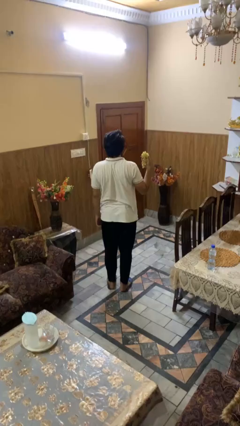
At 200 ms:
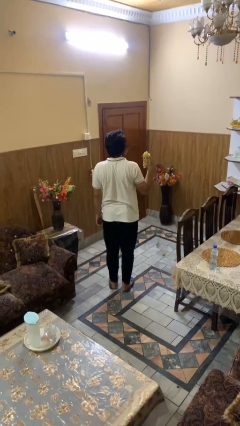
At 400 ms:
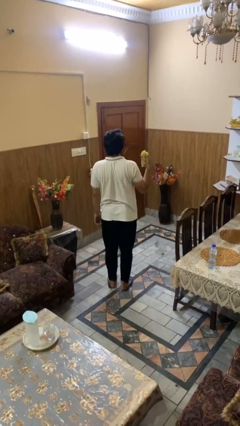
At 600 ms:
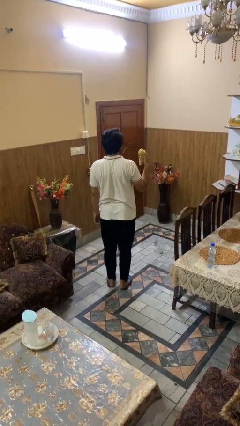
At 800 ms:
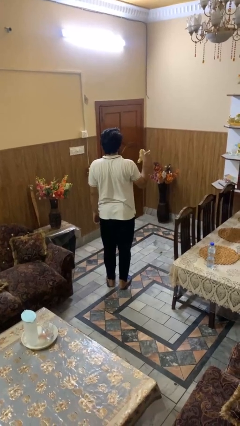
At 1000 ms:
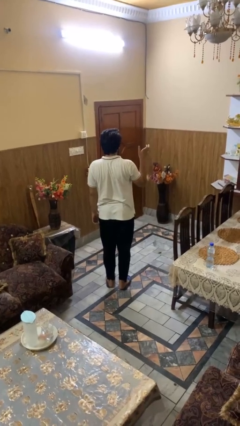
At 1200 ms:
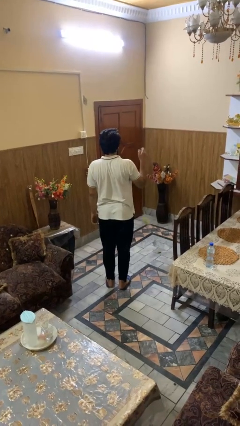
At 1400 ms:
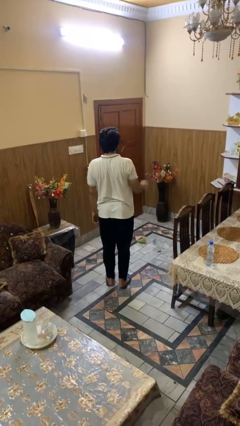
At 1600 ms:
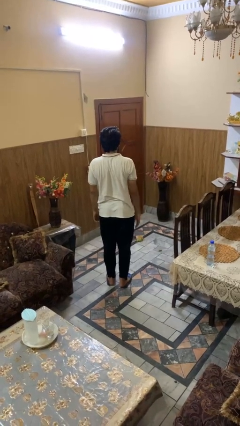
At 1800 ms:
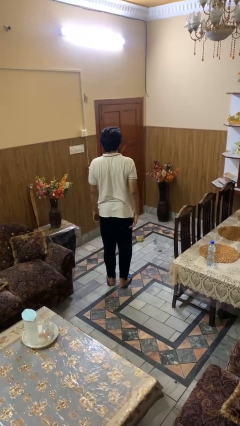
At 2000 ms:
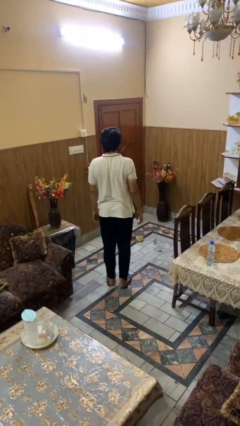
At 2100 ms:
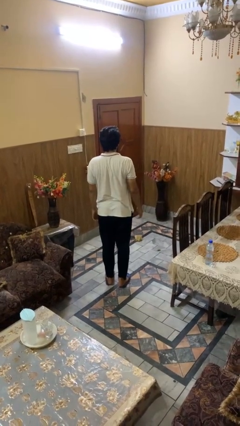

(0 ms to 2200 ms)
person throws object to ground

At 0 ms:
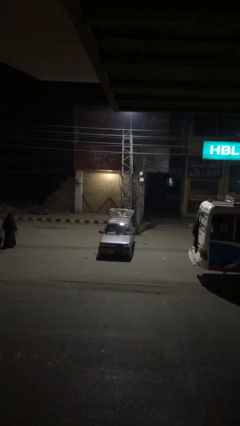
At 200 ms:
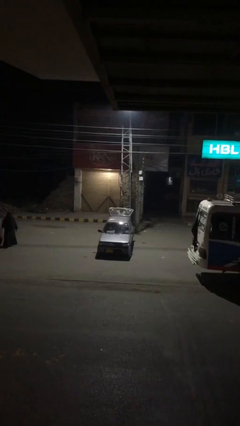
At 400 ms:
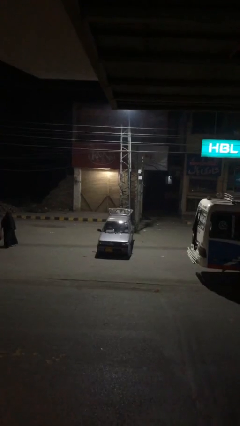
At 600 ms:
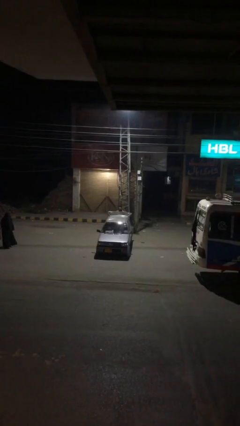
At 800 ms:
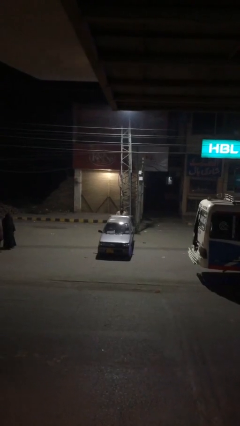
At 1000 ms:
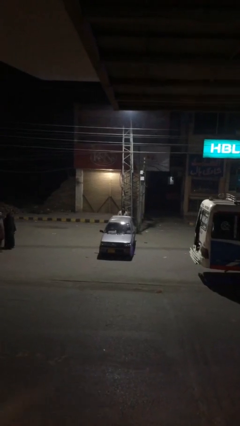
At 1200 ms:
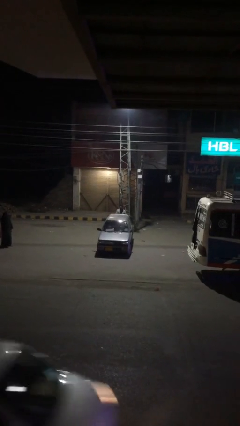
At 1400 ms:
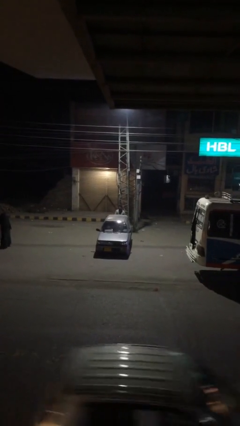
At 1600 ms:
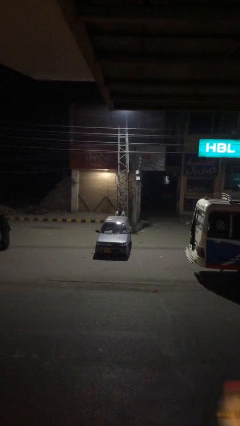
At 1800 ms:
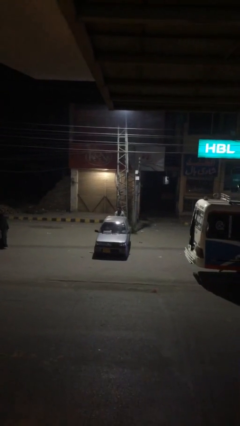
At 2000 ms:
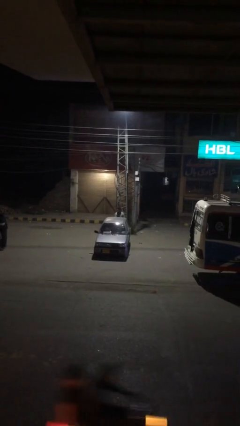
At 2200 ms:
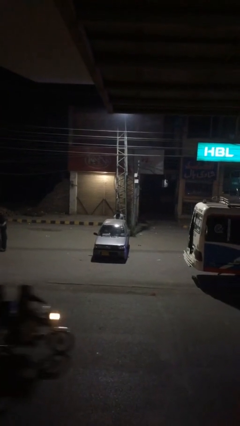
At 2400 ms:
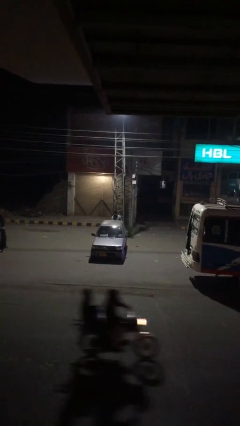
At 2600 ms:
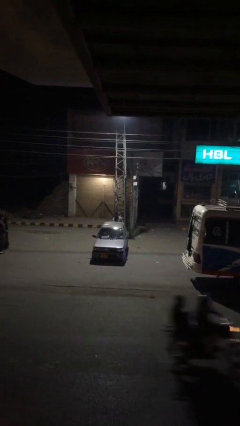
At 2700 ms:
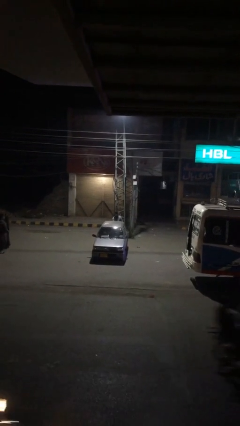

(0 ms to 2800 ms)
person closes car trunk

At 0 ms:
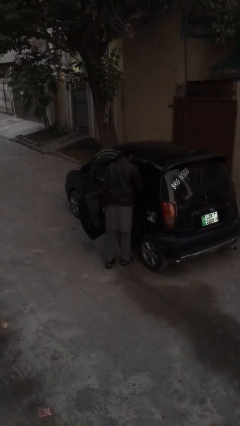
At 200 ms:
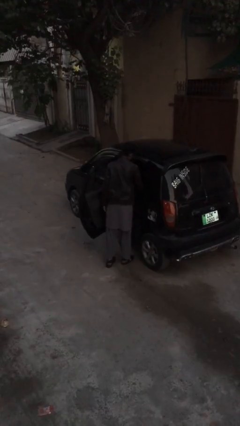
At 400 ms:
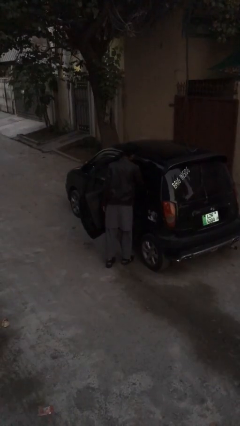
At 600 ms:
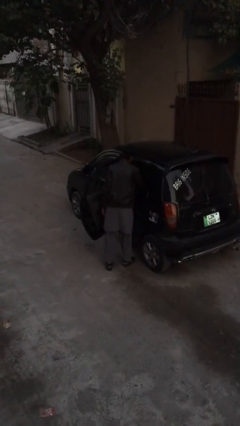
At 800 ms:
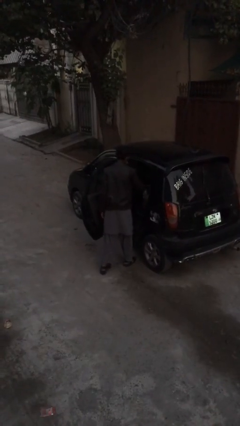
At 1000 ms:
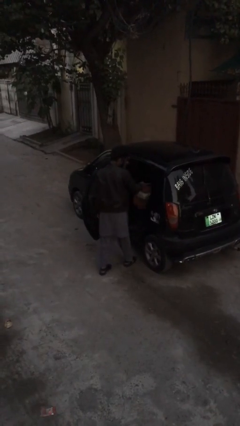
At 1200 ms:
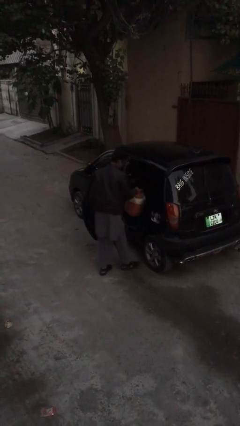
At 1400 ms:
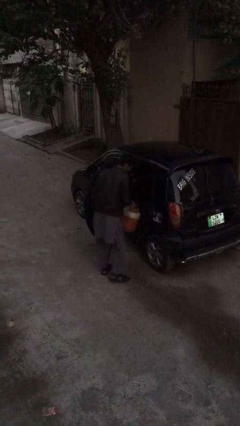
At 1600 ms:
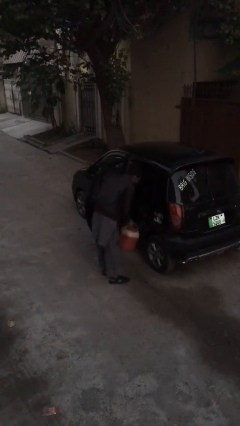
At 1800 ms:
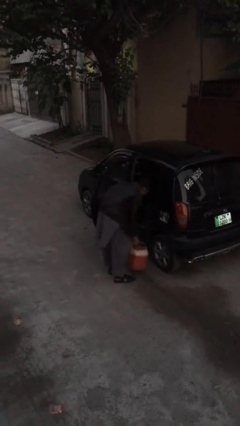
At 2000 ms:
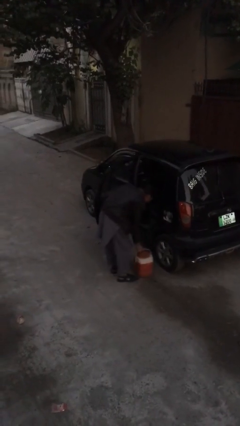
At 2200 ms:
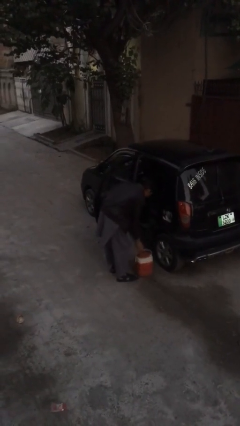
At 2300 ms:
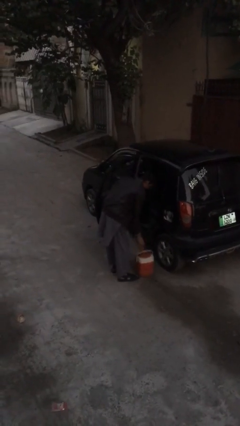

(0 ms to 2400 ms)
person unloads car

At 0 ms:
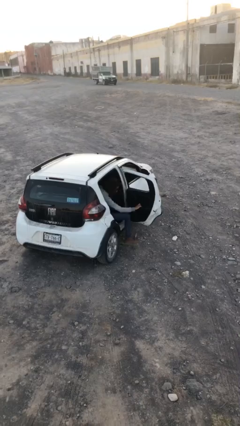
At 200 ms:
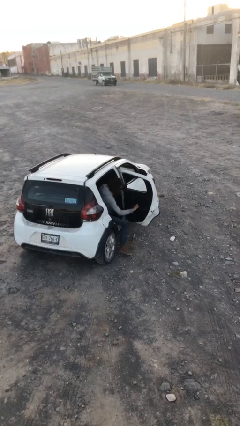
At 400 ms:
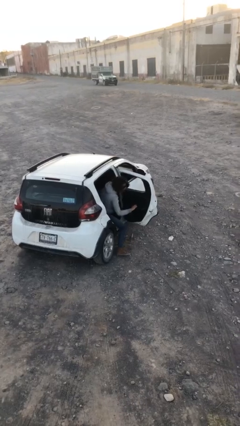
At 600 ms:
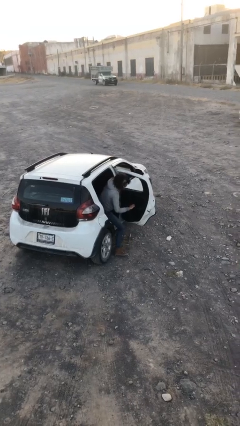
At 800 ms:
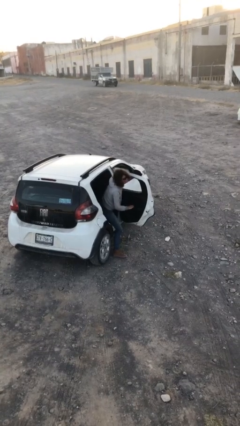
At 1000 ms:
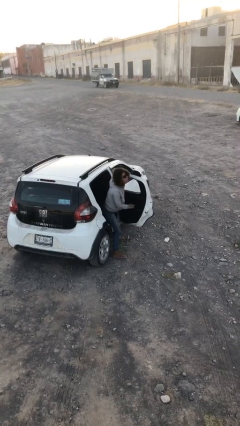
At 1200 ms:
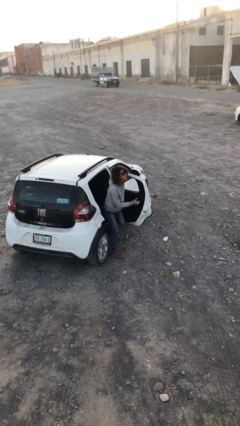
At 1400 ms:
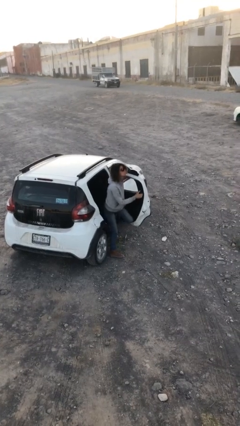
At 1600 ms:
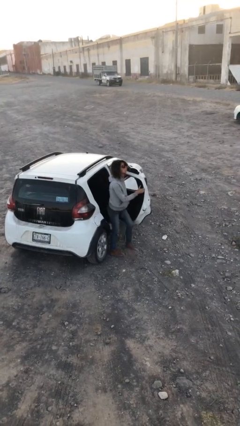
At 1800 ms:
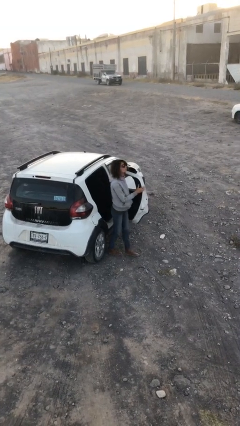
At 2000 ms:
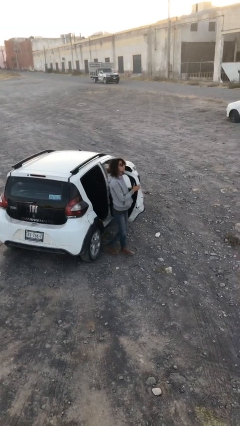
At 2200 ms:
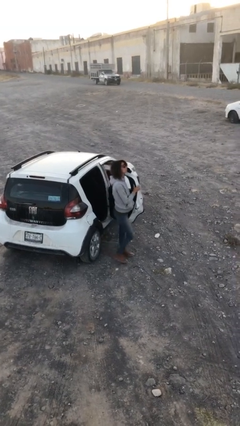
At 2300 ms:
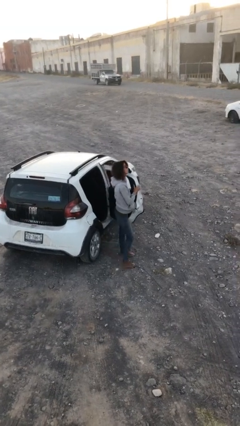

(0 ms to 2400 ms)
person exits car

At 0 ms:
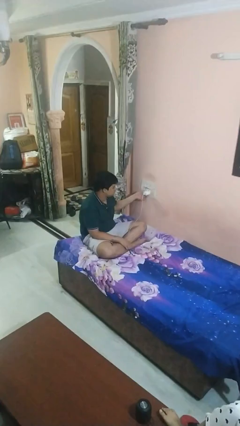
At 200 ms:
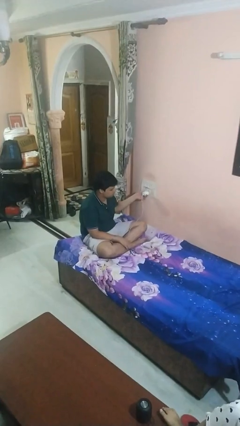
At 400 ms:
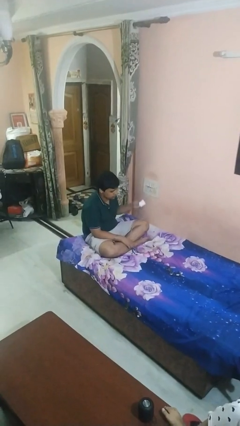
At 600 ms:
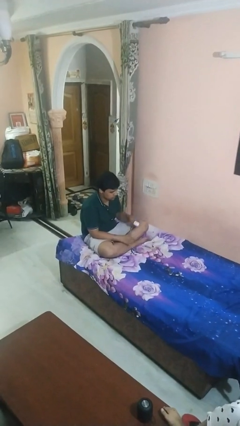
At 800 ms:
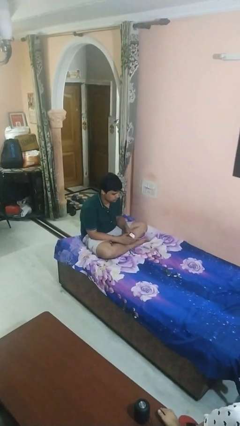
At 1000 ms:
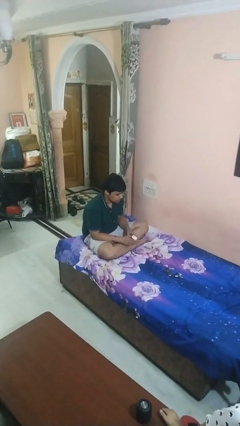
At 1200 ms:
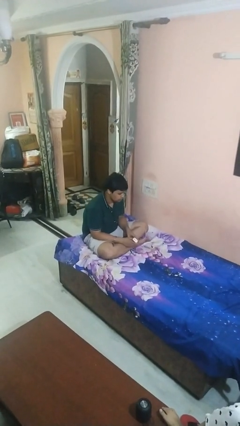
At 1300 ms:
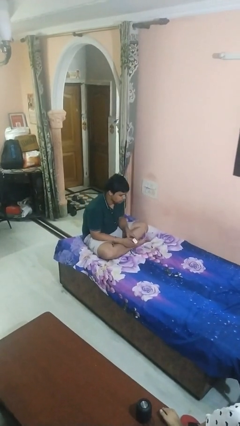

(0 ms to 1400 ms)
person unplugs from electrical socket

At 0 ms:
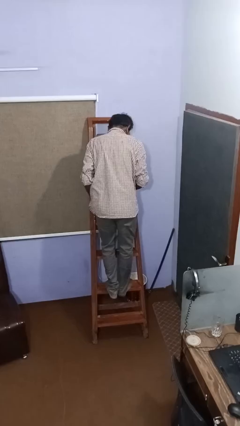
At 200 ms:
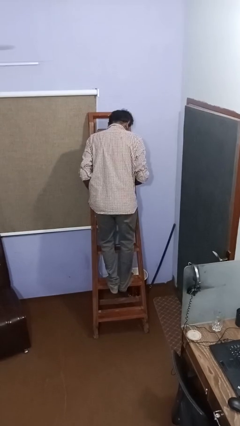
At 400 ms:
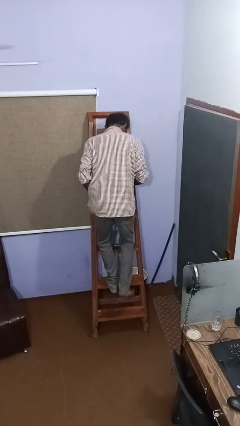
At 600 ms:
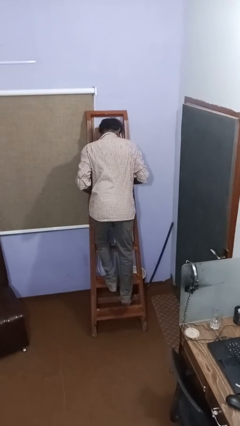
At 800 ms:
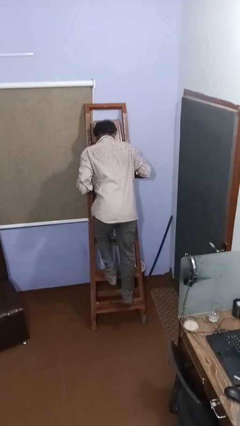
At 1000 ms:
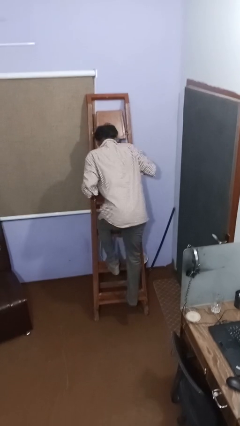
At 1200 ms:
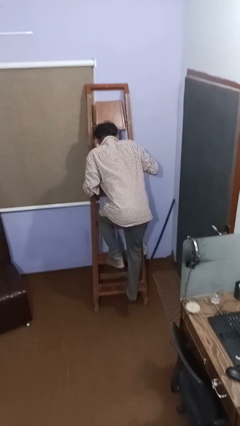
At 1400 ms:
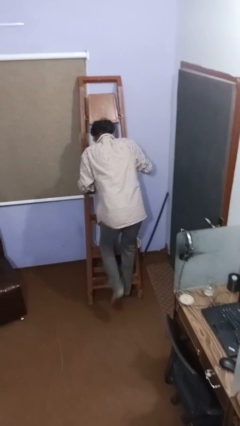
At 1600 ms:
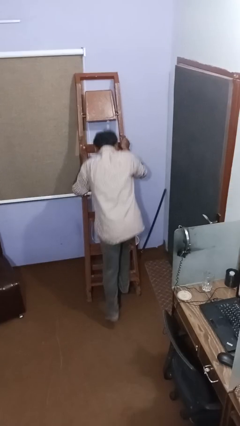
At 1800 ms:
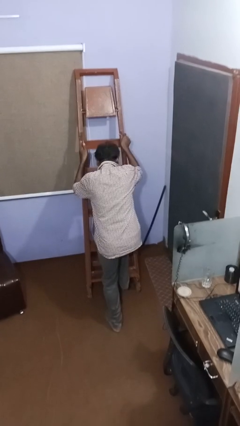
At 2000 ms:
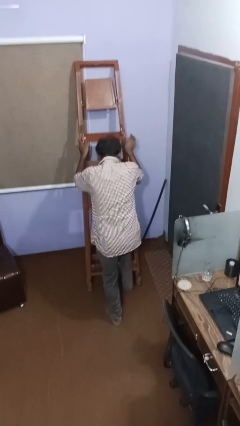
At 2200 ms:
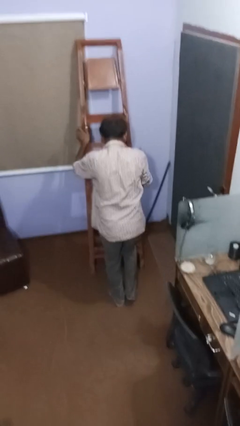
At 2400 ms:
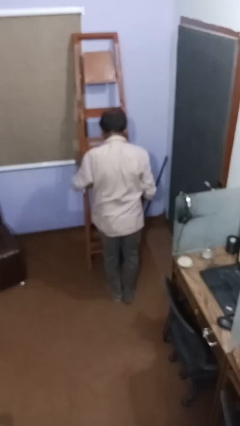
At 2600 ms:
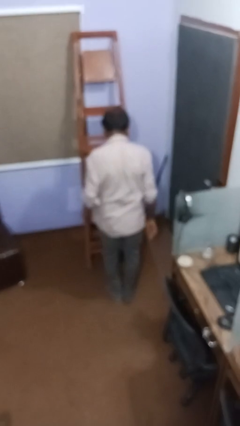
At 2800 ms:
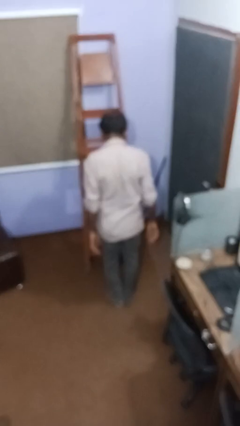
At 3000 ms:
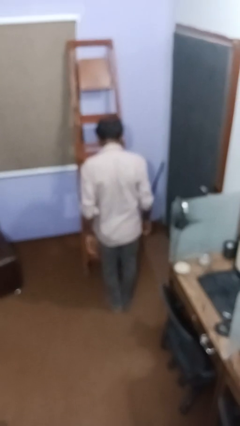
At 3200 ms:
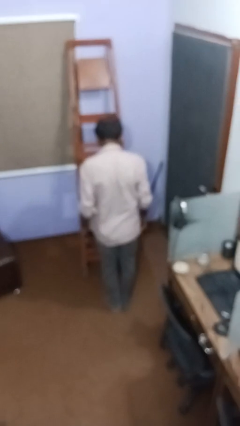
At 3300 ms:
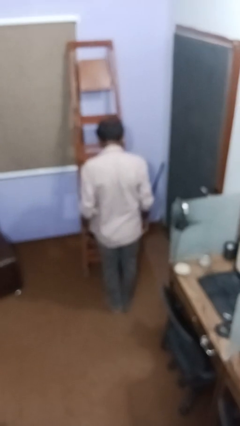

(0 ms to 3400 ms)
person climbs down ladder

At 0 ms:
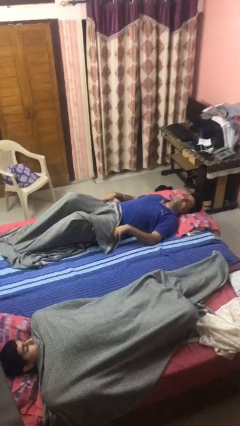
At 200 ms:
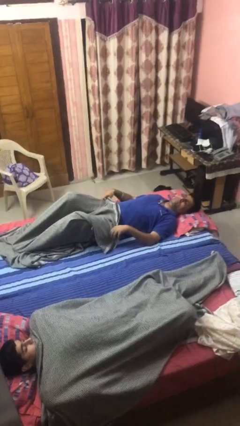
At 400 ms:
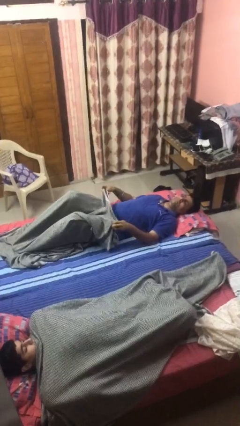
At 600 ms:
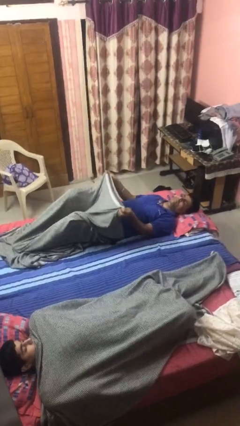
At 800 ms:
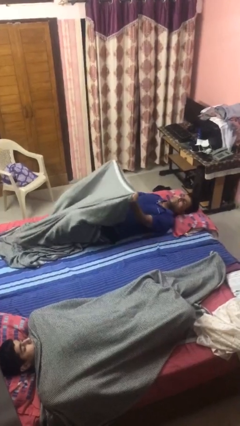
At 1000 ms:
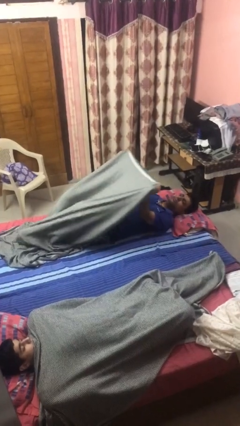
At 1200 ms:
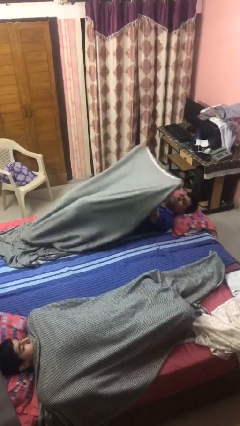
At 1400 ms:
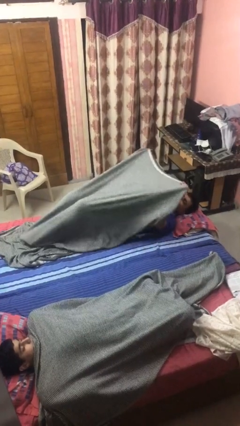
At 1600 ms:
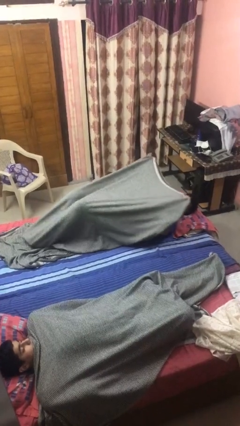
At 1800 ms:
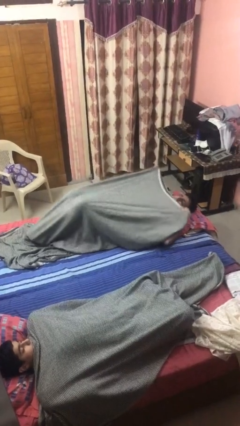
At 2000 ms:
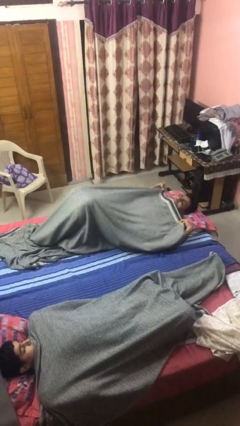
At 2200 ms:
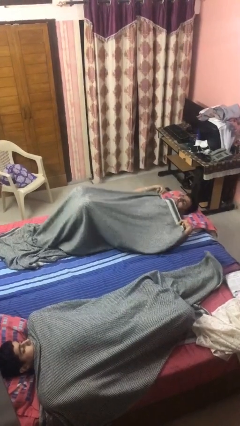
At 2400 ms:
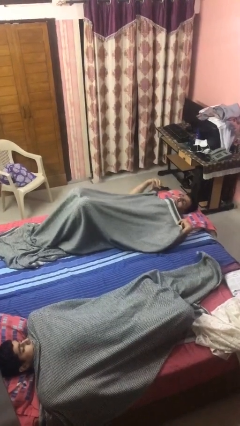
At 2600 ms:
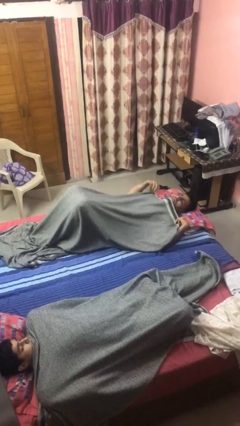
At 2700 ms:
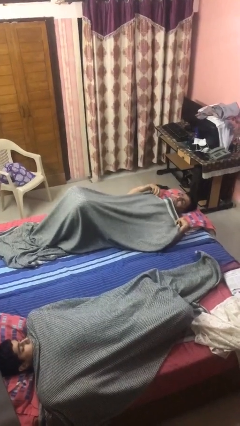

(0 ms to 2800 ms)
person covers with bedsheets
